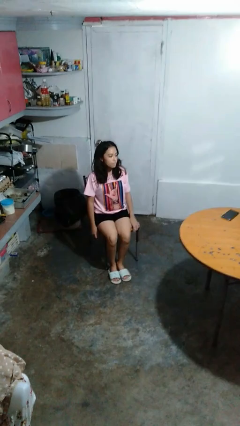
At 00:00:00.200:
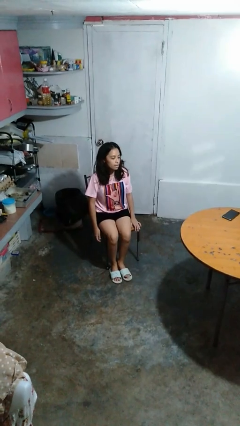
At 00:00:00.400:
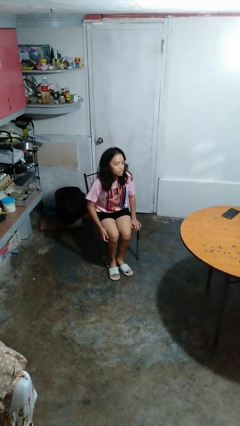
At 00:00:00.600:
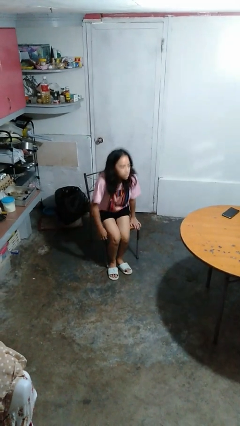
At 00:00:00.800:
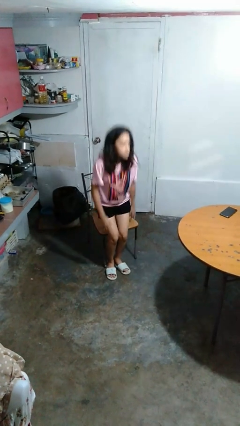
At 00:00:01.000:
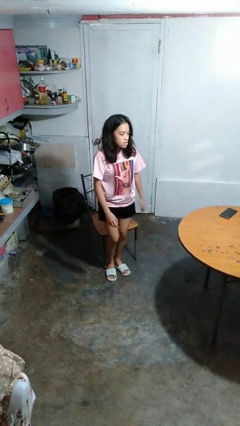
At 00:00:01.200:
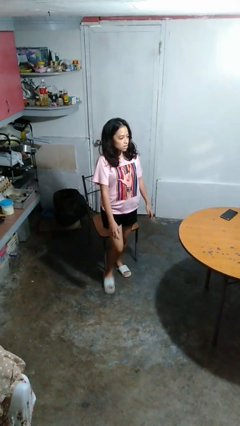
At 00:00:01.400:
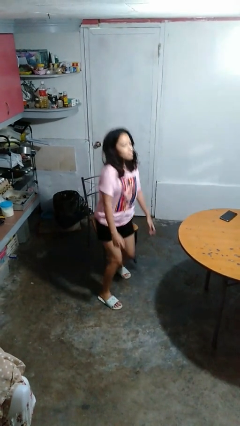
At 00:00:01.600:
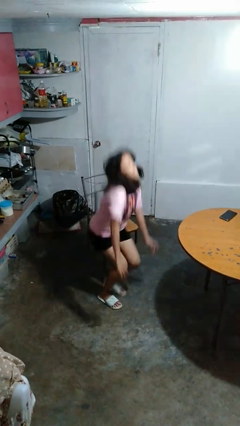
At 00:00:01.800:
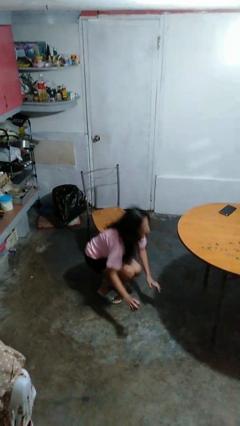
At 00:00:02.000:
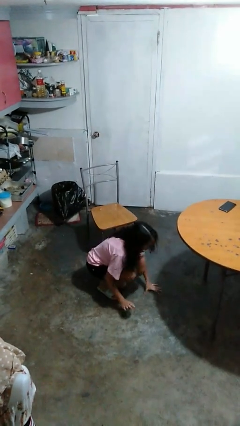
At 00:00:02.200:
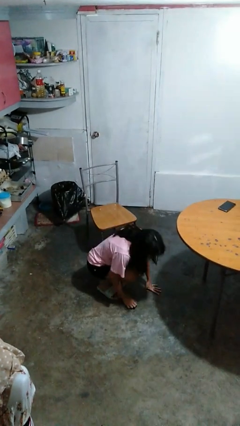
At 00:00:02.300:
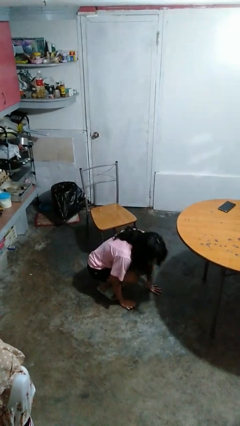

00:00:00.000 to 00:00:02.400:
person falls from chair

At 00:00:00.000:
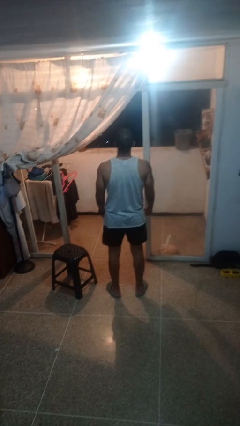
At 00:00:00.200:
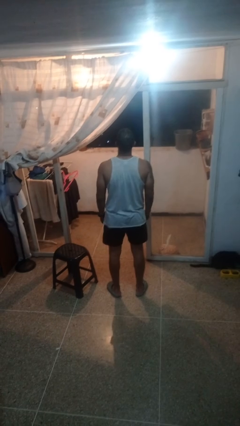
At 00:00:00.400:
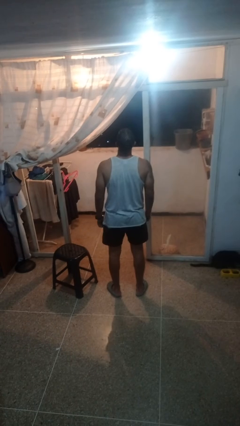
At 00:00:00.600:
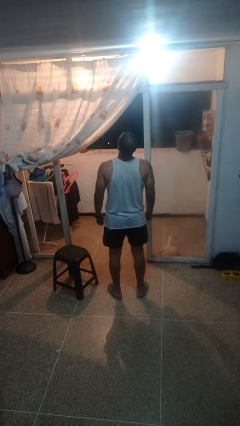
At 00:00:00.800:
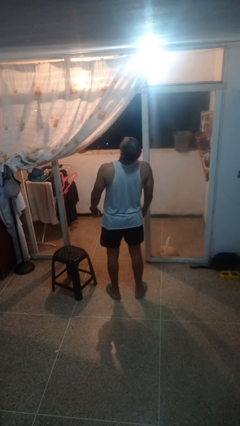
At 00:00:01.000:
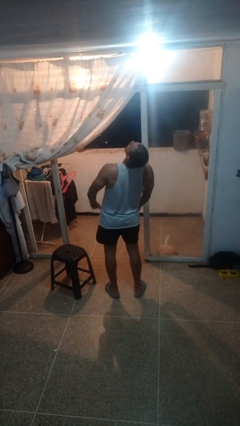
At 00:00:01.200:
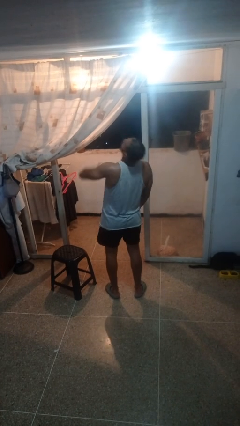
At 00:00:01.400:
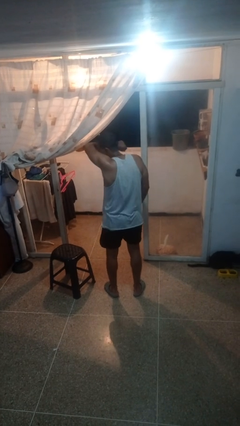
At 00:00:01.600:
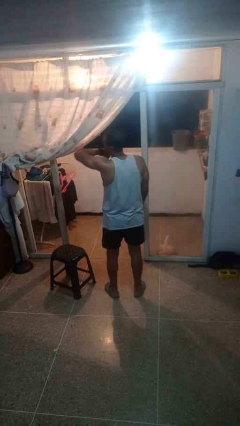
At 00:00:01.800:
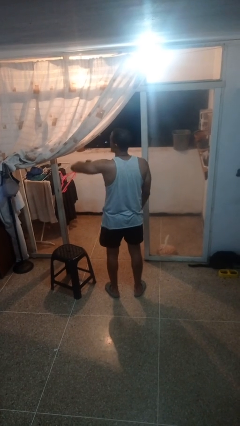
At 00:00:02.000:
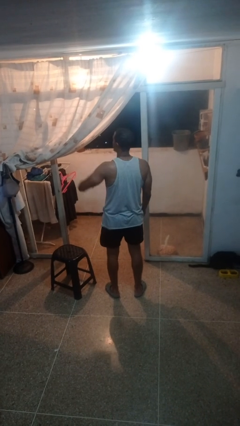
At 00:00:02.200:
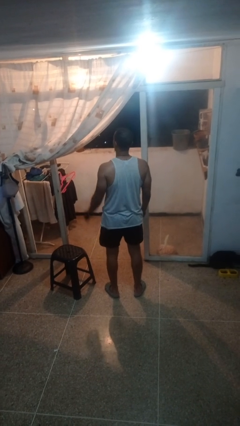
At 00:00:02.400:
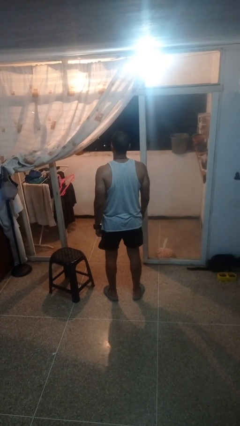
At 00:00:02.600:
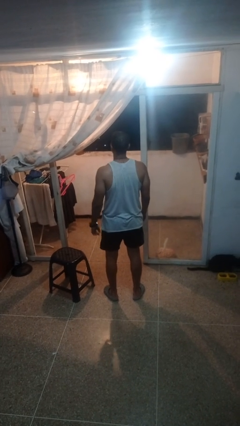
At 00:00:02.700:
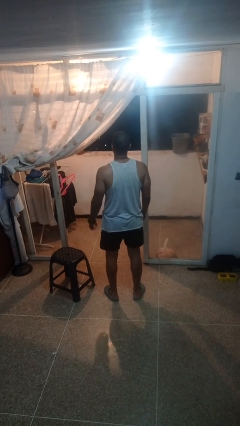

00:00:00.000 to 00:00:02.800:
person sneezes into arm

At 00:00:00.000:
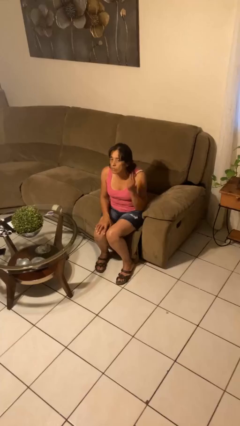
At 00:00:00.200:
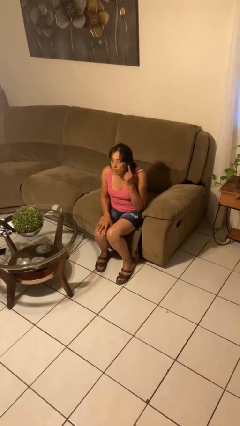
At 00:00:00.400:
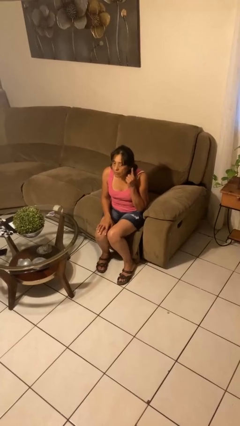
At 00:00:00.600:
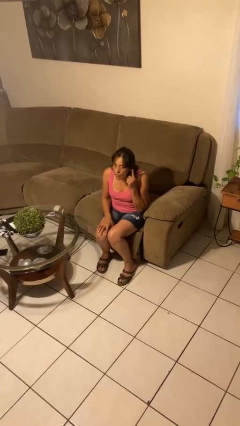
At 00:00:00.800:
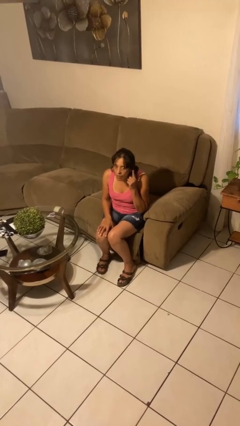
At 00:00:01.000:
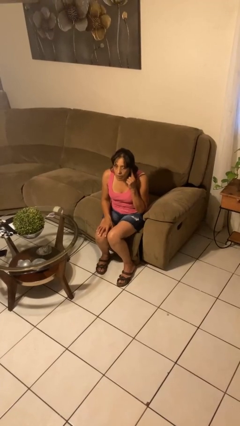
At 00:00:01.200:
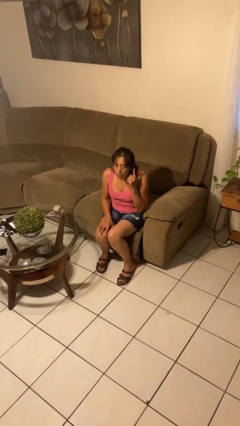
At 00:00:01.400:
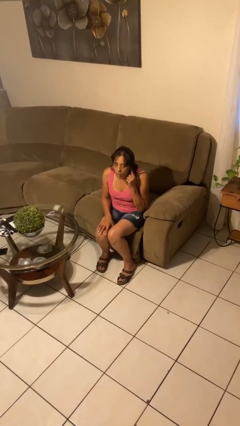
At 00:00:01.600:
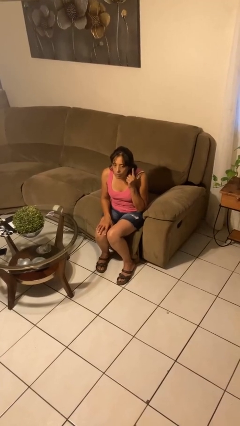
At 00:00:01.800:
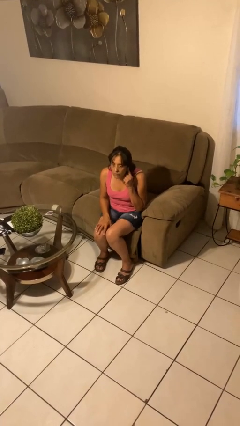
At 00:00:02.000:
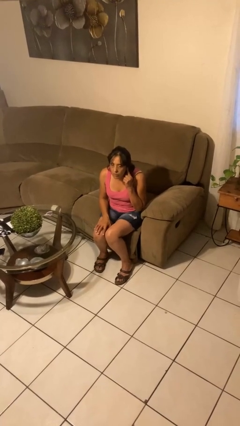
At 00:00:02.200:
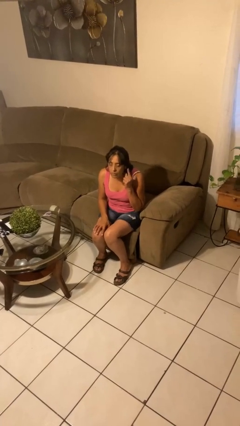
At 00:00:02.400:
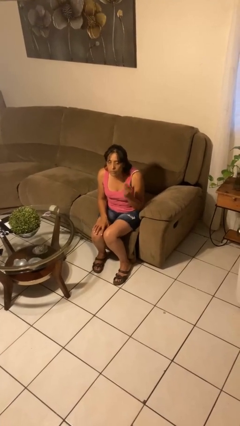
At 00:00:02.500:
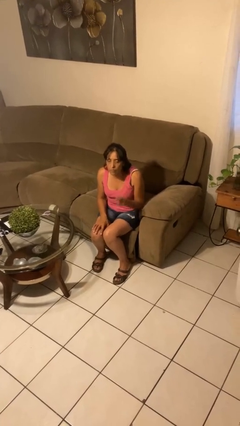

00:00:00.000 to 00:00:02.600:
person gestures listen closely

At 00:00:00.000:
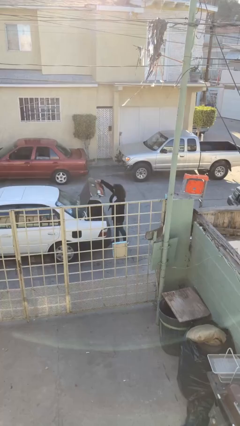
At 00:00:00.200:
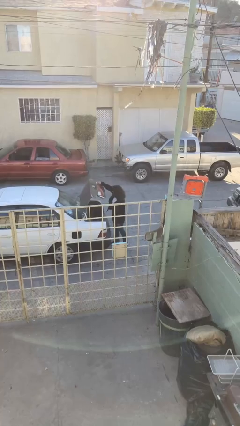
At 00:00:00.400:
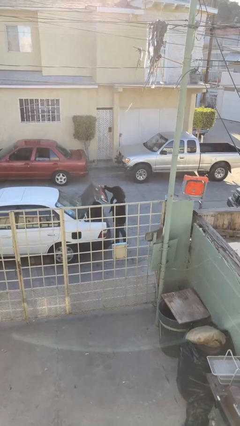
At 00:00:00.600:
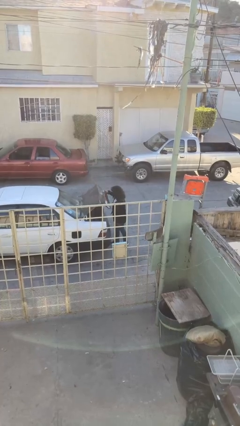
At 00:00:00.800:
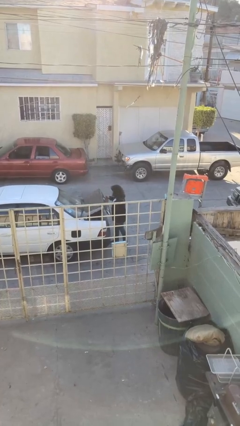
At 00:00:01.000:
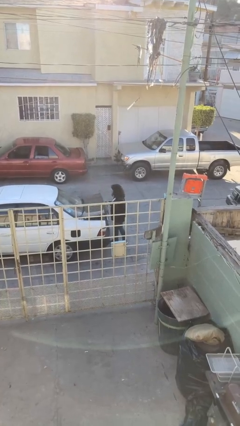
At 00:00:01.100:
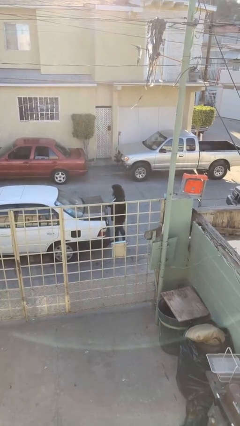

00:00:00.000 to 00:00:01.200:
person closes car trunk

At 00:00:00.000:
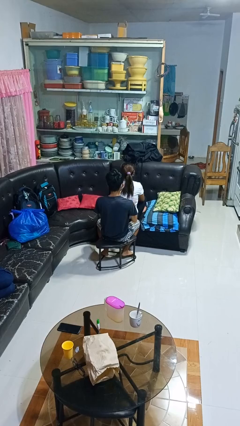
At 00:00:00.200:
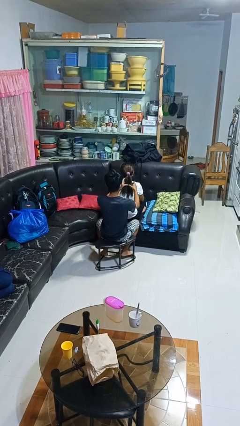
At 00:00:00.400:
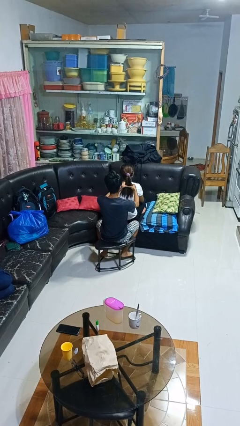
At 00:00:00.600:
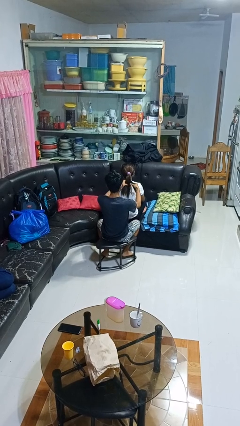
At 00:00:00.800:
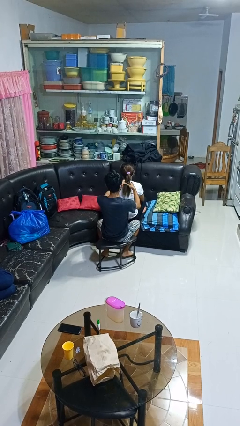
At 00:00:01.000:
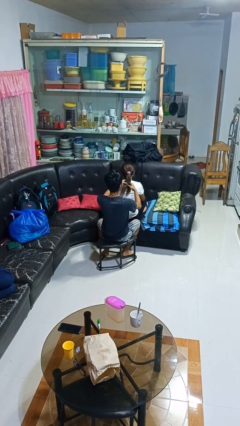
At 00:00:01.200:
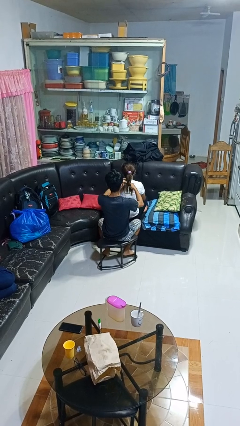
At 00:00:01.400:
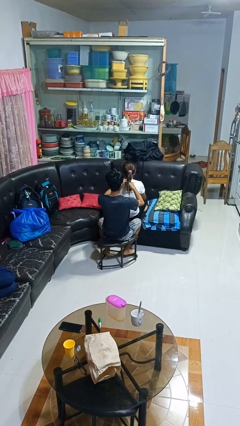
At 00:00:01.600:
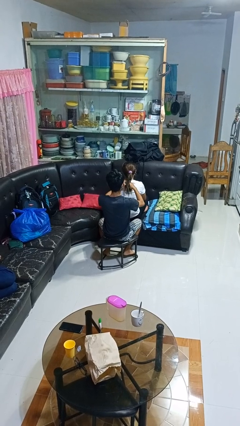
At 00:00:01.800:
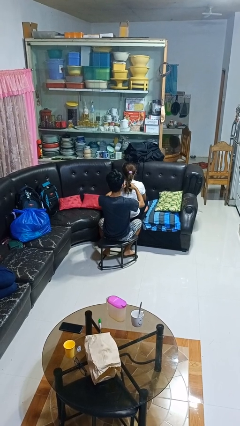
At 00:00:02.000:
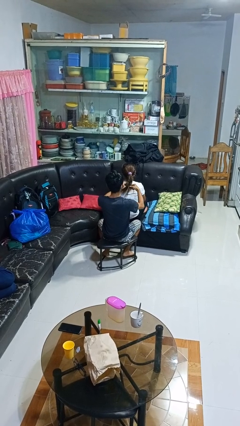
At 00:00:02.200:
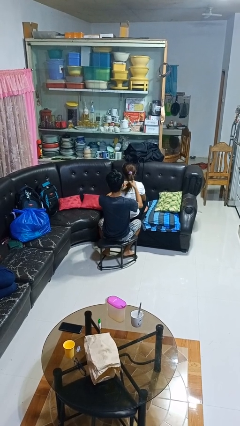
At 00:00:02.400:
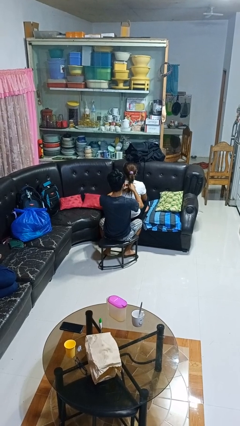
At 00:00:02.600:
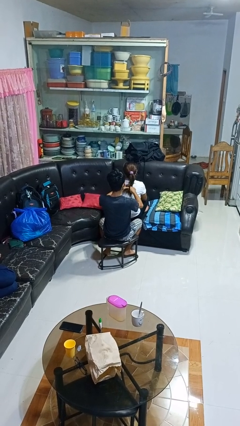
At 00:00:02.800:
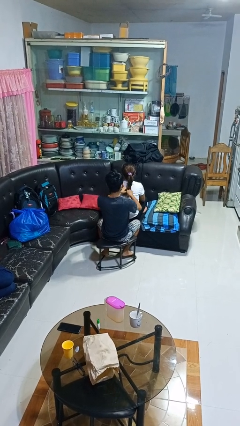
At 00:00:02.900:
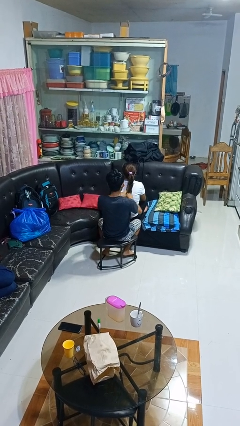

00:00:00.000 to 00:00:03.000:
person braids hair of person

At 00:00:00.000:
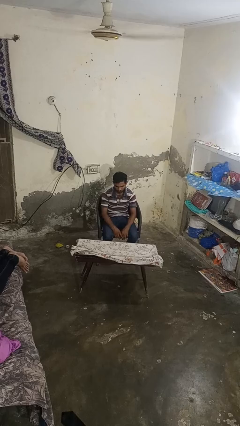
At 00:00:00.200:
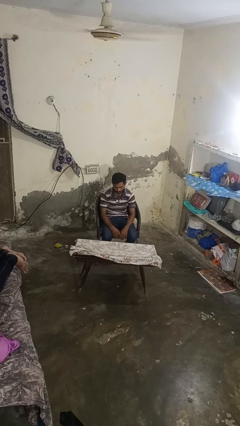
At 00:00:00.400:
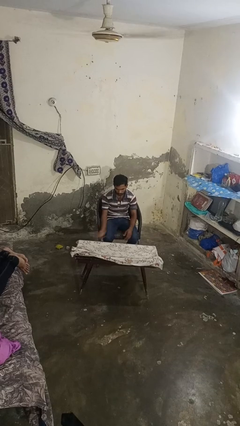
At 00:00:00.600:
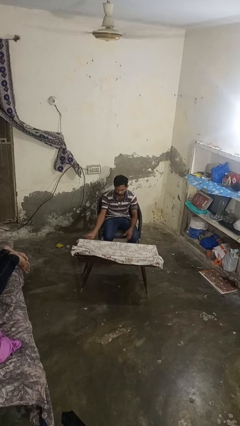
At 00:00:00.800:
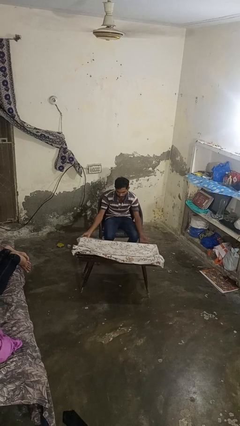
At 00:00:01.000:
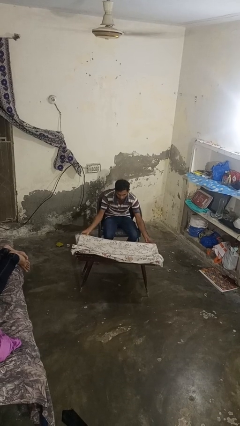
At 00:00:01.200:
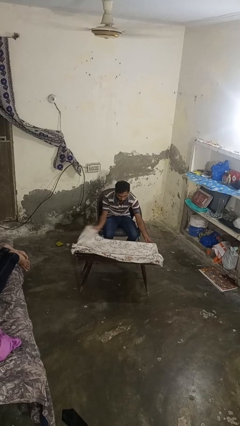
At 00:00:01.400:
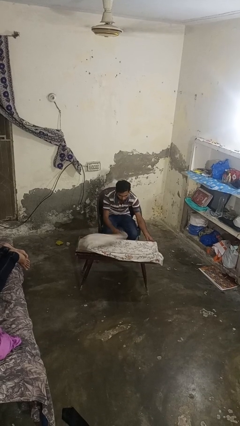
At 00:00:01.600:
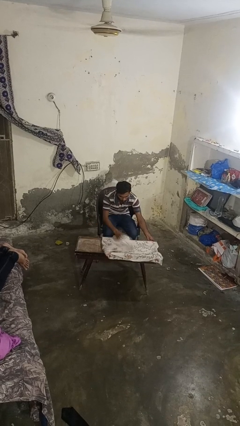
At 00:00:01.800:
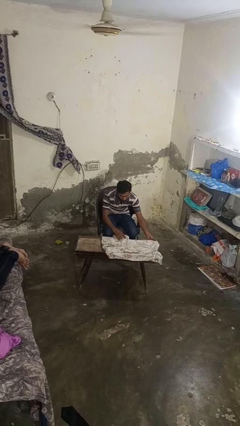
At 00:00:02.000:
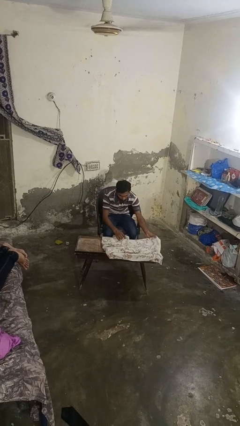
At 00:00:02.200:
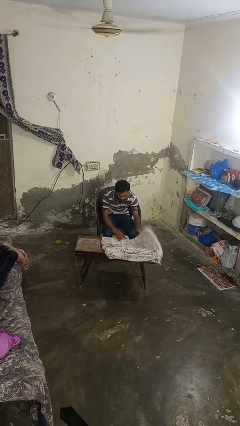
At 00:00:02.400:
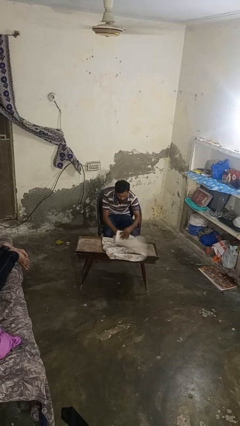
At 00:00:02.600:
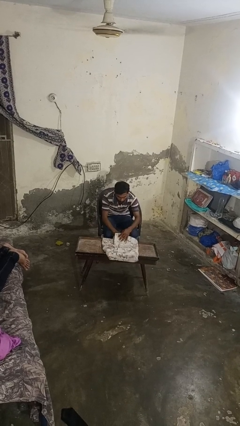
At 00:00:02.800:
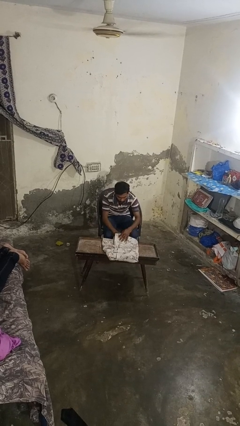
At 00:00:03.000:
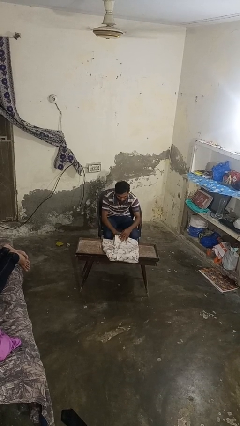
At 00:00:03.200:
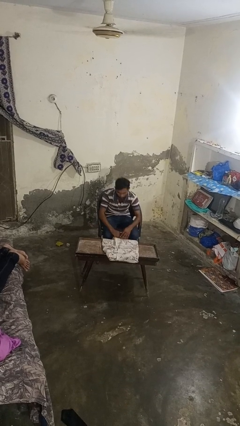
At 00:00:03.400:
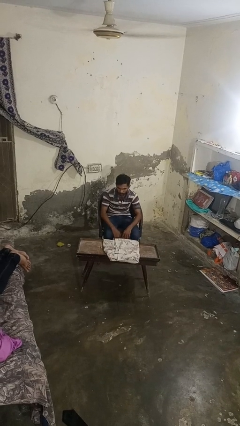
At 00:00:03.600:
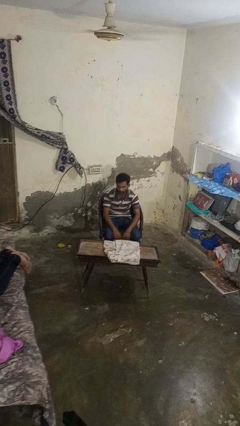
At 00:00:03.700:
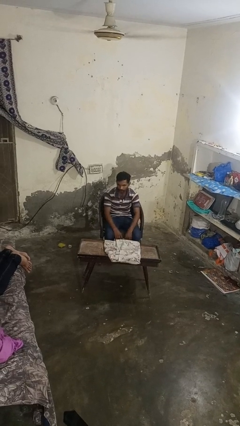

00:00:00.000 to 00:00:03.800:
person folds tablecloth

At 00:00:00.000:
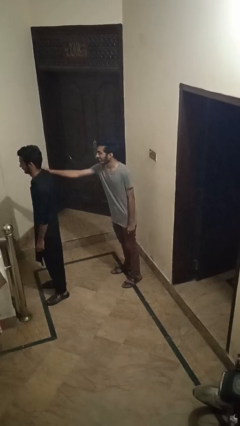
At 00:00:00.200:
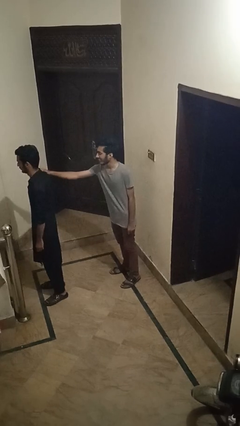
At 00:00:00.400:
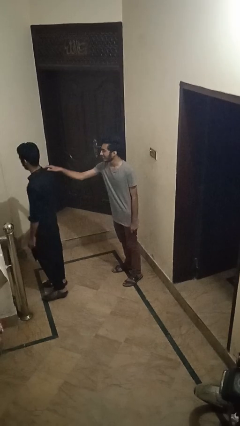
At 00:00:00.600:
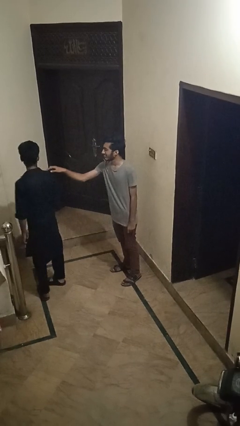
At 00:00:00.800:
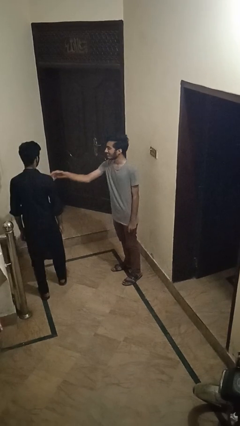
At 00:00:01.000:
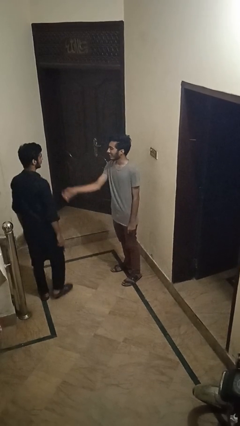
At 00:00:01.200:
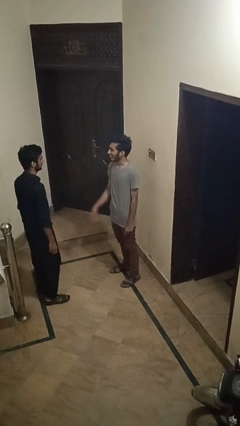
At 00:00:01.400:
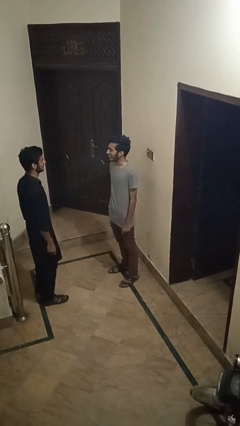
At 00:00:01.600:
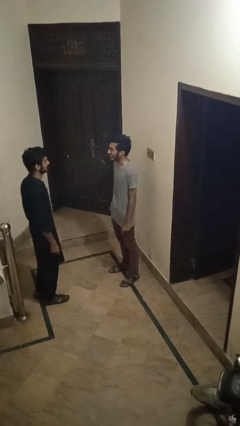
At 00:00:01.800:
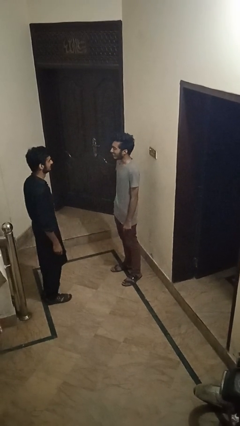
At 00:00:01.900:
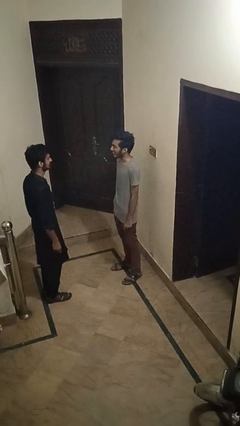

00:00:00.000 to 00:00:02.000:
person spins person around
